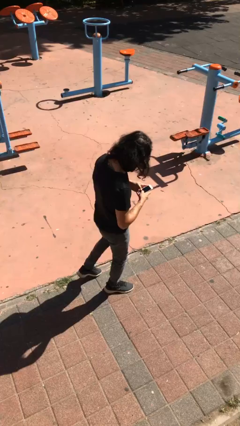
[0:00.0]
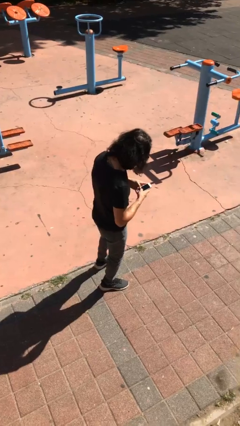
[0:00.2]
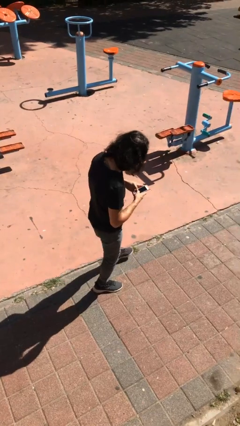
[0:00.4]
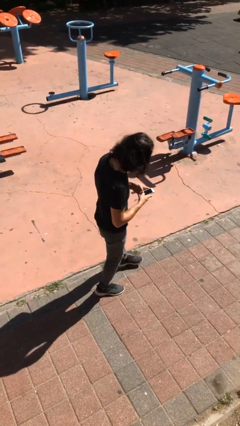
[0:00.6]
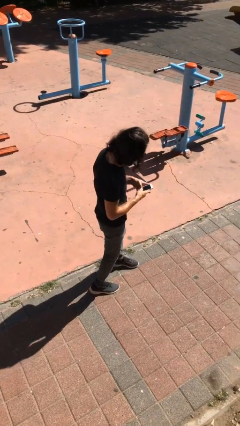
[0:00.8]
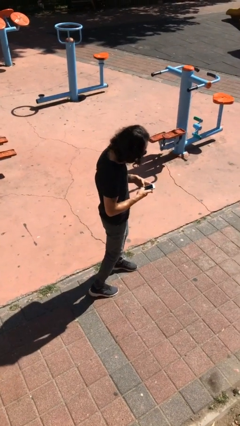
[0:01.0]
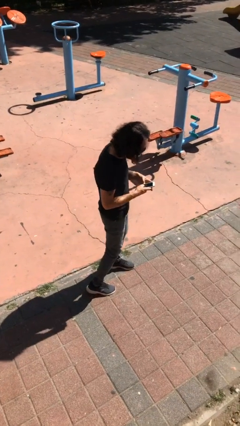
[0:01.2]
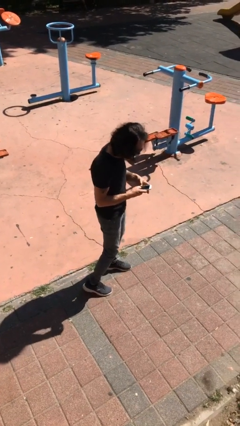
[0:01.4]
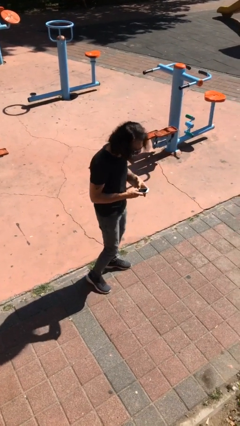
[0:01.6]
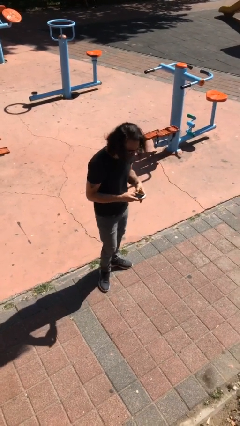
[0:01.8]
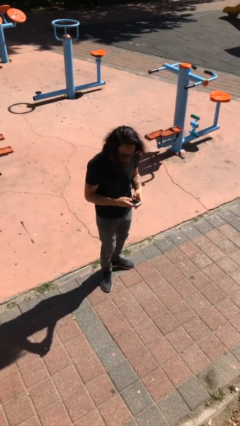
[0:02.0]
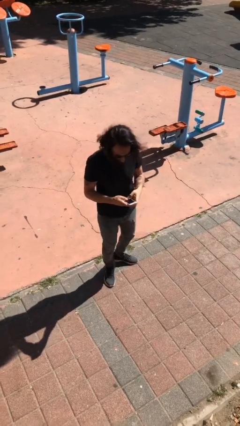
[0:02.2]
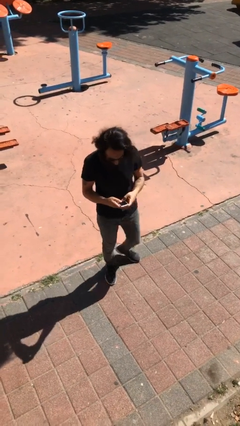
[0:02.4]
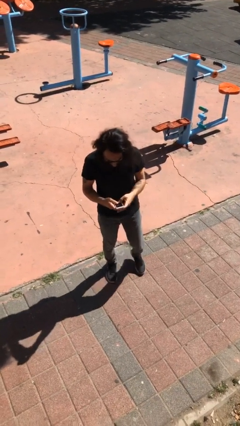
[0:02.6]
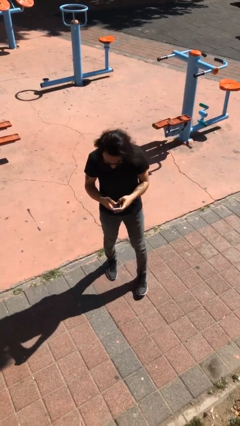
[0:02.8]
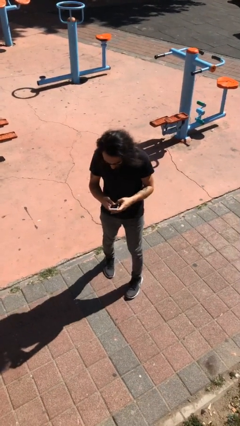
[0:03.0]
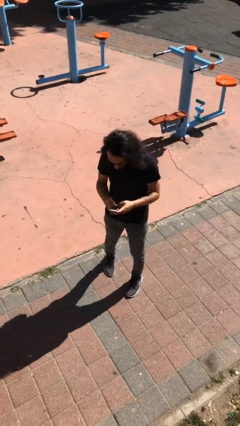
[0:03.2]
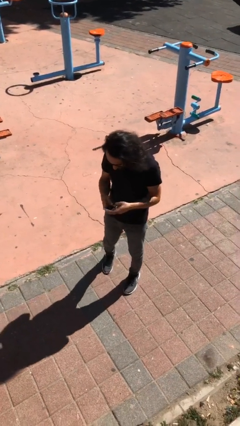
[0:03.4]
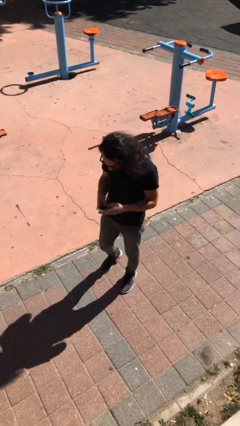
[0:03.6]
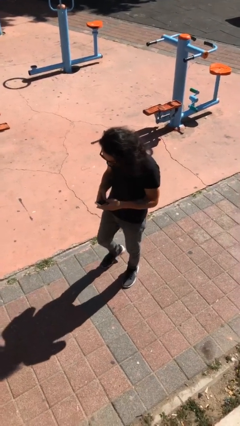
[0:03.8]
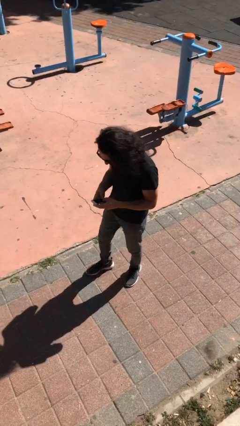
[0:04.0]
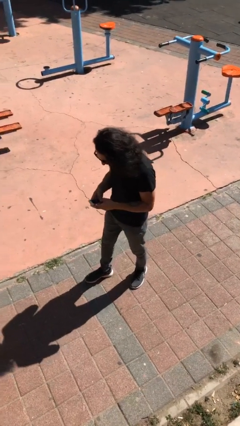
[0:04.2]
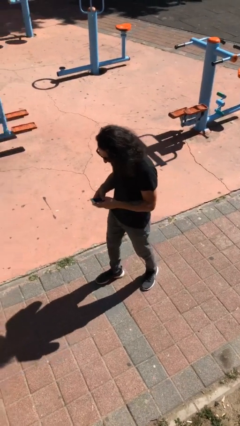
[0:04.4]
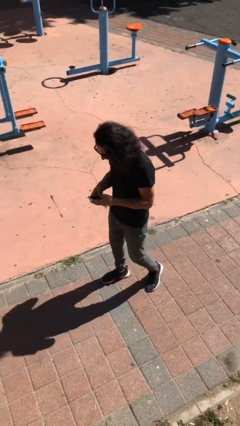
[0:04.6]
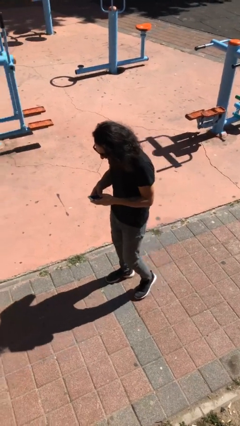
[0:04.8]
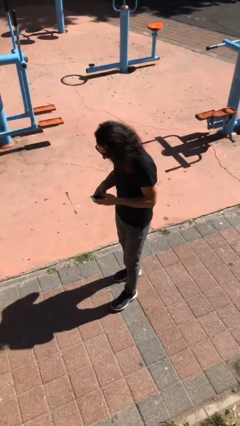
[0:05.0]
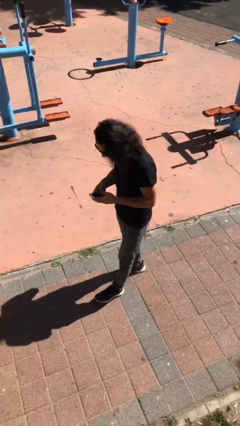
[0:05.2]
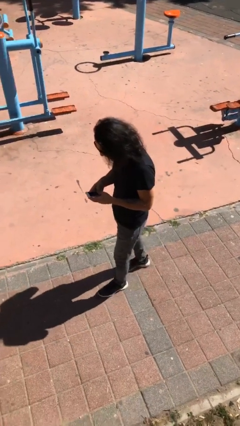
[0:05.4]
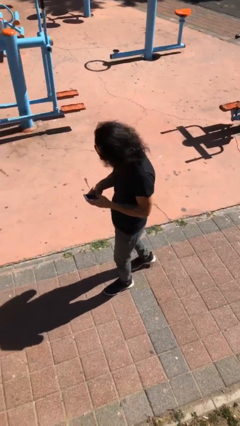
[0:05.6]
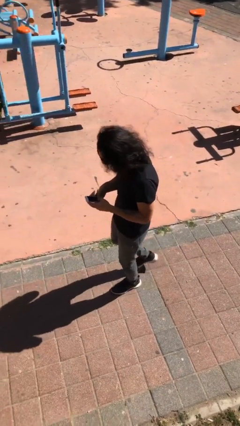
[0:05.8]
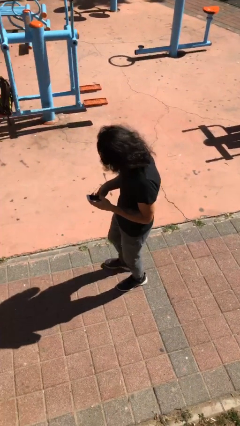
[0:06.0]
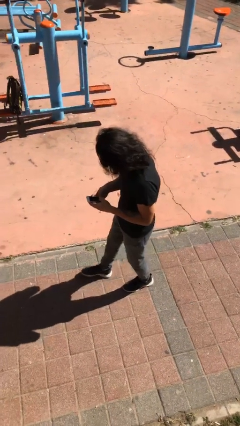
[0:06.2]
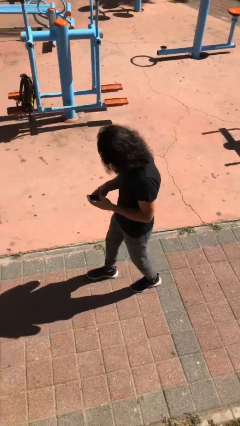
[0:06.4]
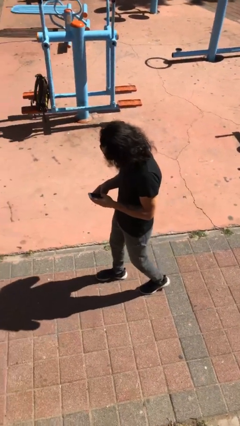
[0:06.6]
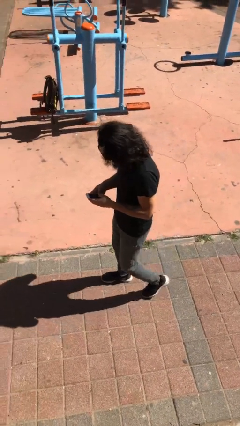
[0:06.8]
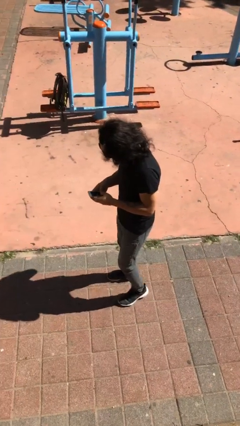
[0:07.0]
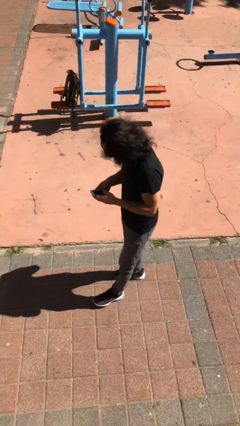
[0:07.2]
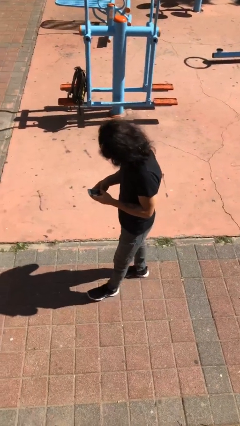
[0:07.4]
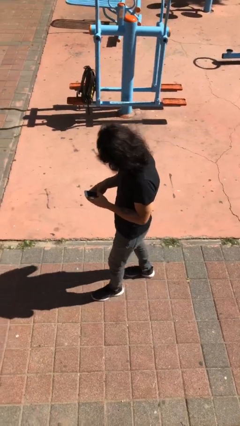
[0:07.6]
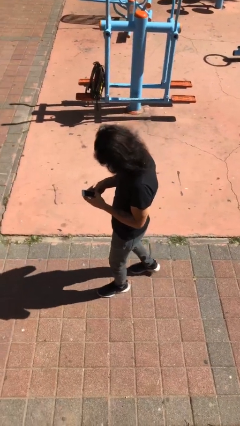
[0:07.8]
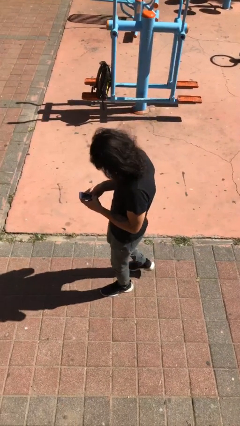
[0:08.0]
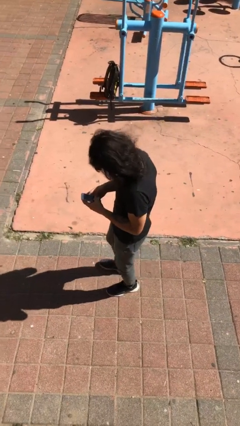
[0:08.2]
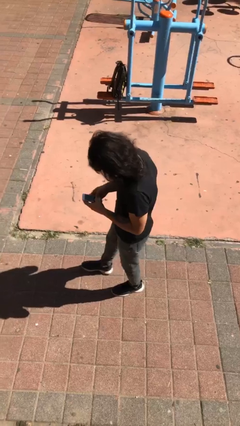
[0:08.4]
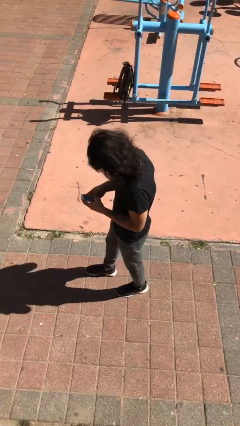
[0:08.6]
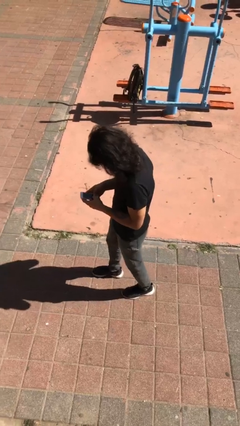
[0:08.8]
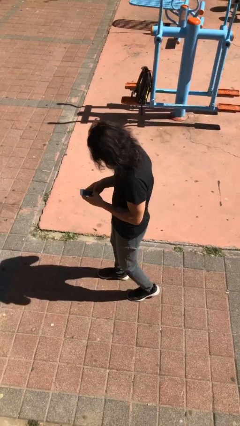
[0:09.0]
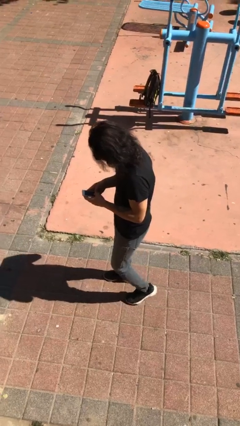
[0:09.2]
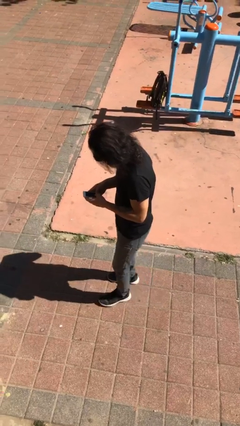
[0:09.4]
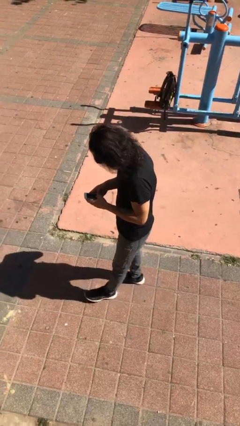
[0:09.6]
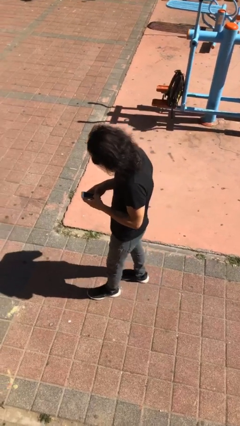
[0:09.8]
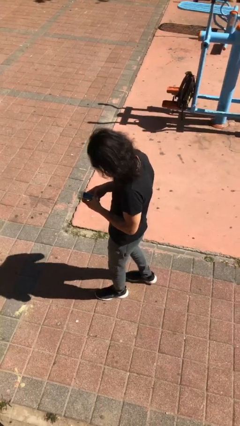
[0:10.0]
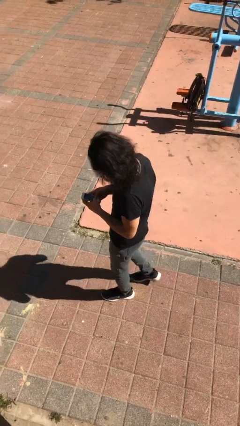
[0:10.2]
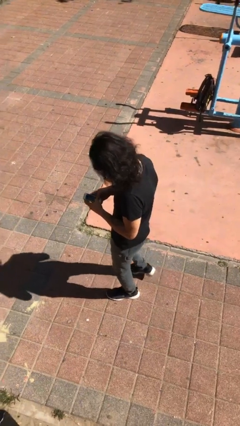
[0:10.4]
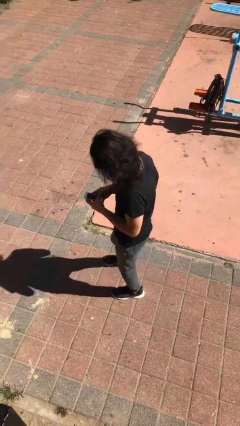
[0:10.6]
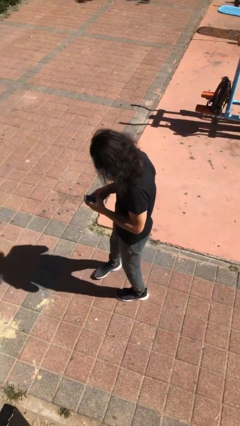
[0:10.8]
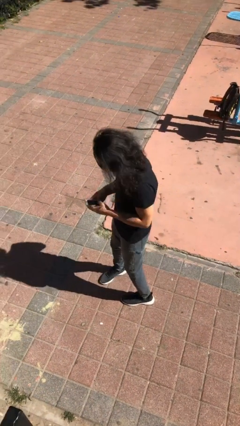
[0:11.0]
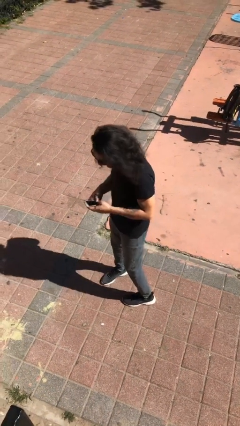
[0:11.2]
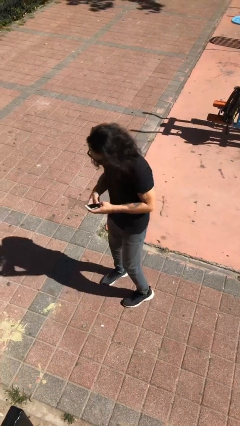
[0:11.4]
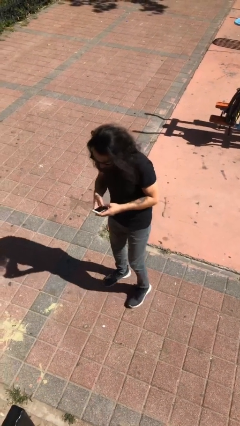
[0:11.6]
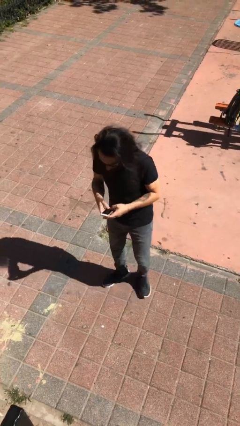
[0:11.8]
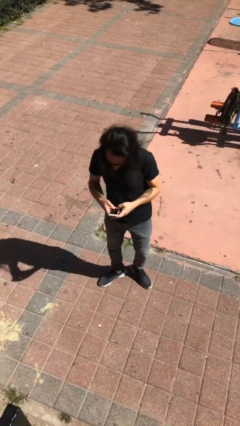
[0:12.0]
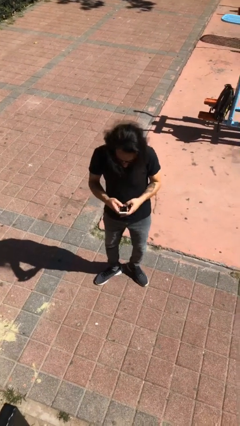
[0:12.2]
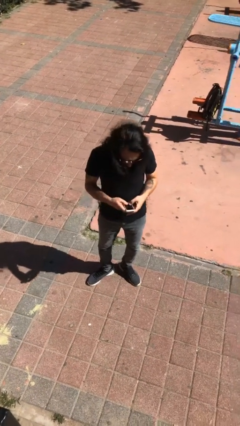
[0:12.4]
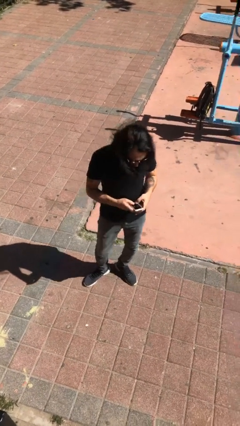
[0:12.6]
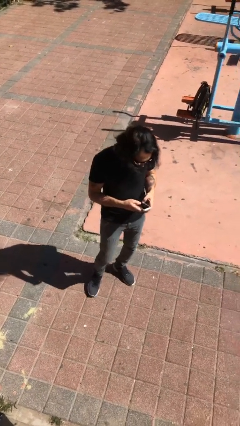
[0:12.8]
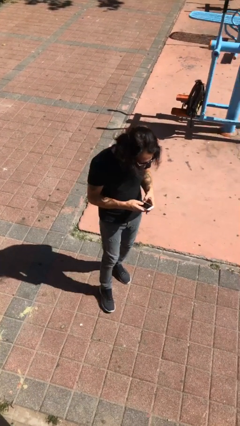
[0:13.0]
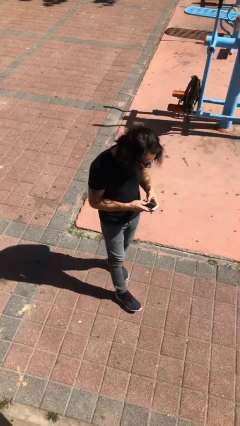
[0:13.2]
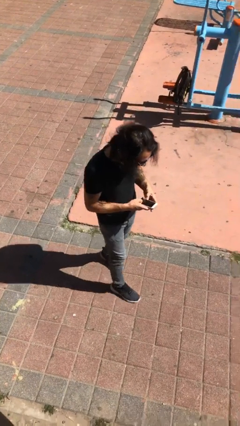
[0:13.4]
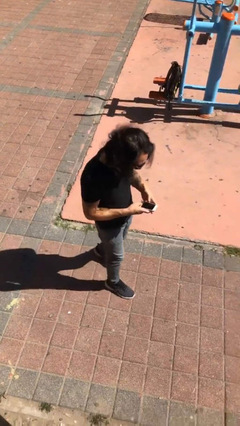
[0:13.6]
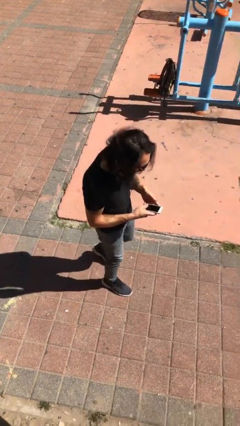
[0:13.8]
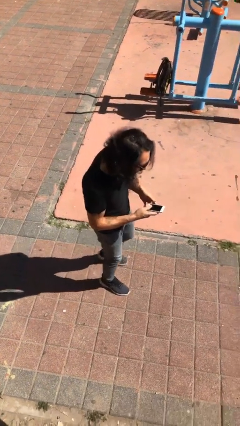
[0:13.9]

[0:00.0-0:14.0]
person texts on phone

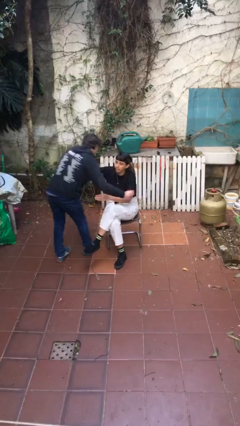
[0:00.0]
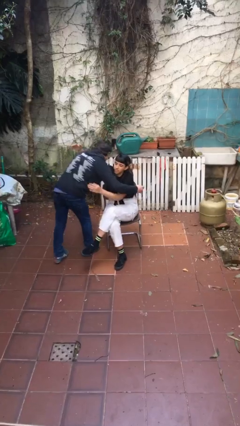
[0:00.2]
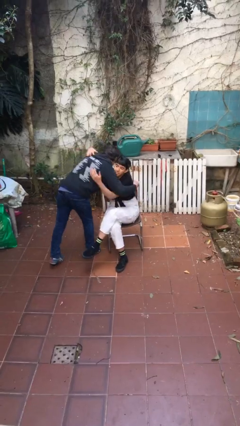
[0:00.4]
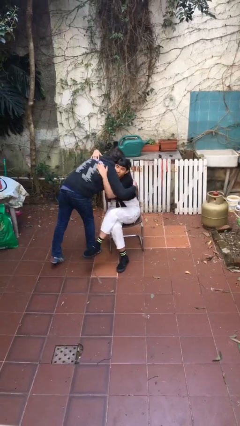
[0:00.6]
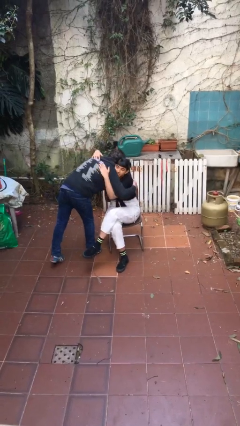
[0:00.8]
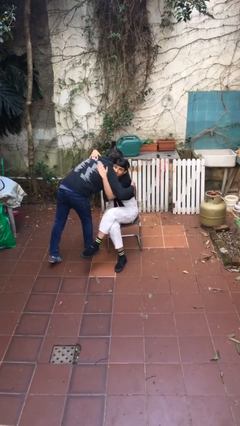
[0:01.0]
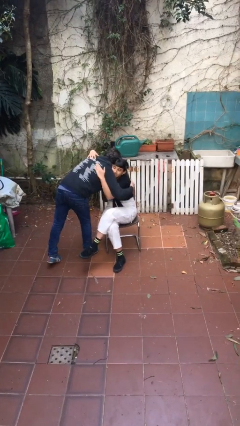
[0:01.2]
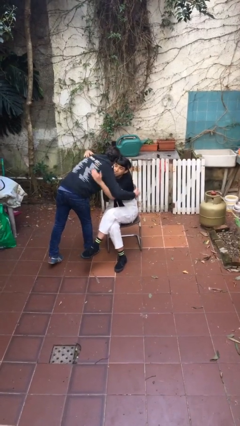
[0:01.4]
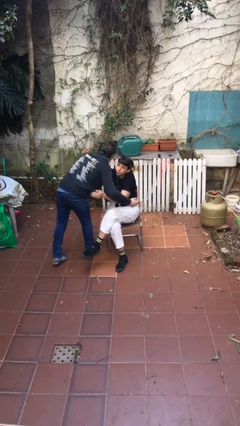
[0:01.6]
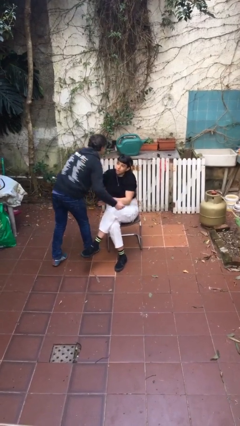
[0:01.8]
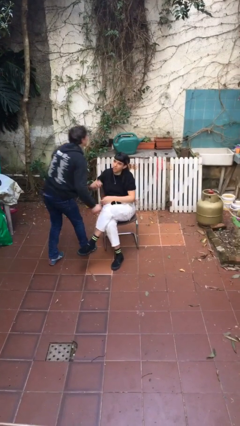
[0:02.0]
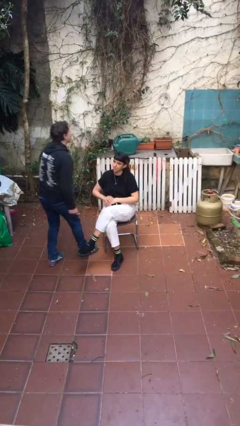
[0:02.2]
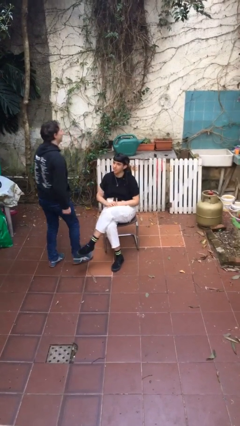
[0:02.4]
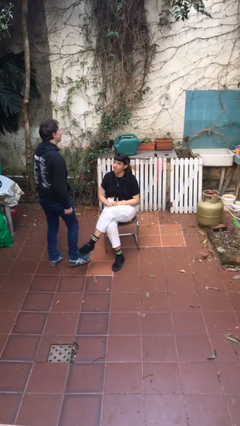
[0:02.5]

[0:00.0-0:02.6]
person embraces person

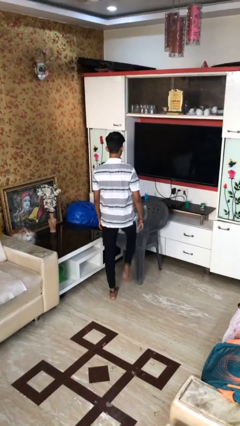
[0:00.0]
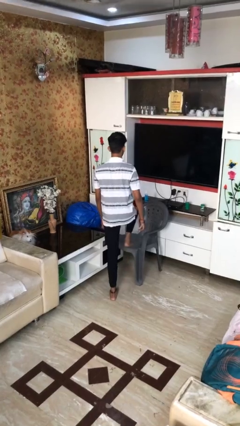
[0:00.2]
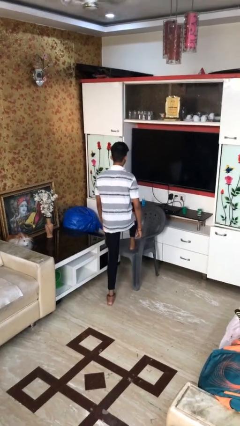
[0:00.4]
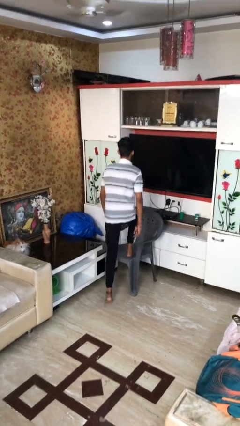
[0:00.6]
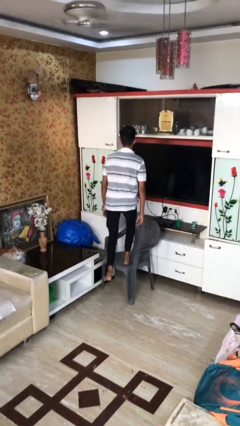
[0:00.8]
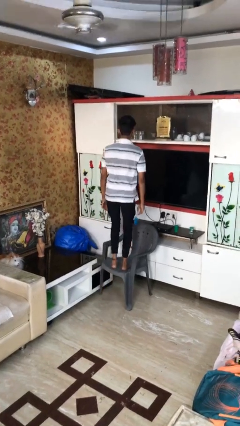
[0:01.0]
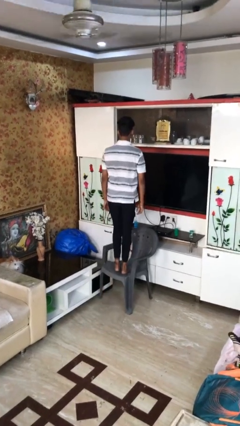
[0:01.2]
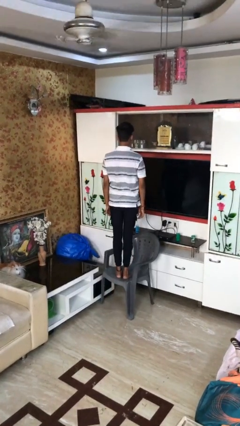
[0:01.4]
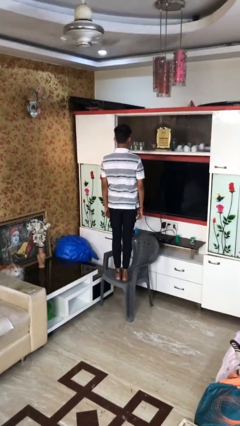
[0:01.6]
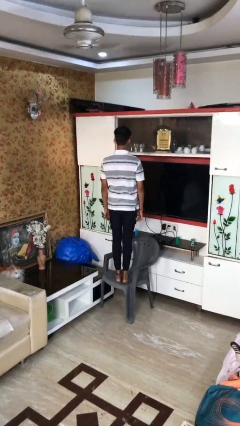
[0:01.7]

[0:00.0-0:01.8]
person climbs on chair
